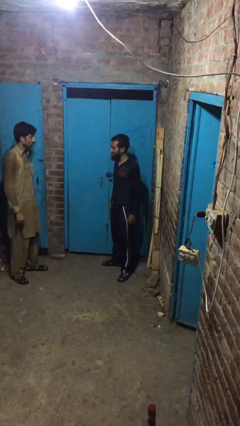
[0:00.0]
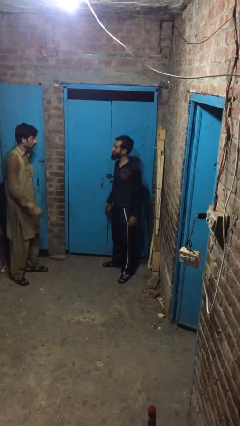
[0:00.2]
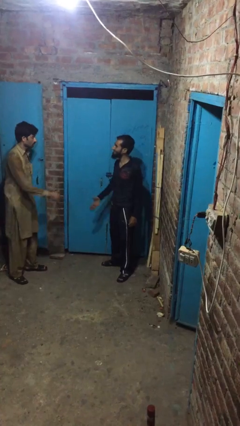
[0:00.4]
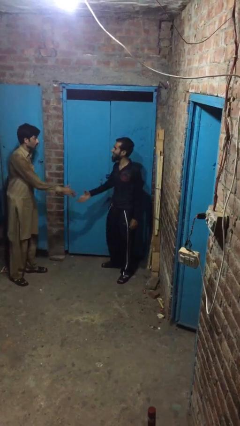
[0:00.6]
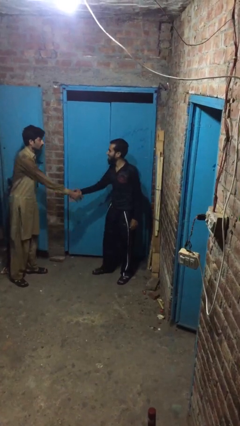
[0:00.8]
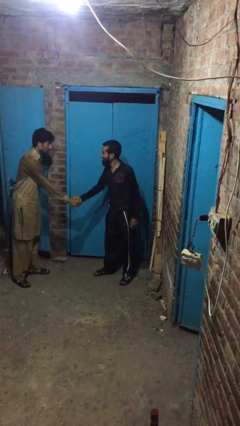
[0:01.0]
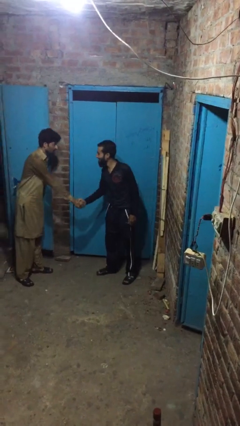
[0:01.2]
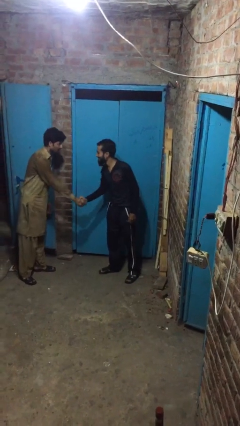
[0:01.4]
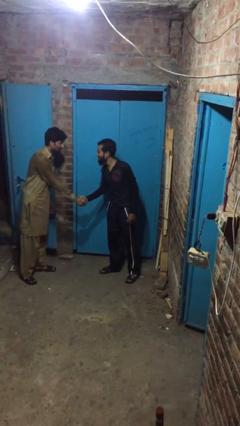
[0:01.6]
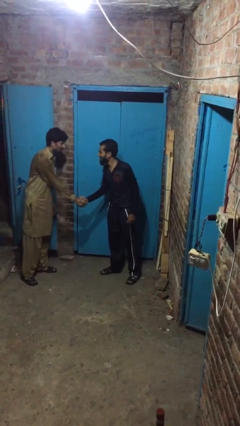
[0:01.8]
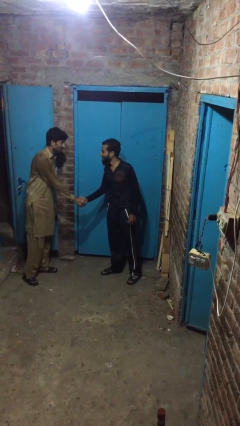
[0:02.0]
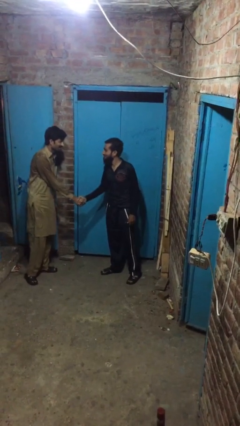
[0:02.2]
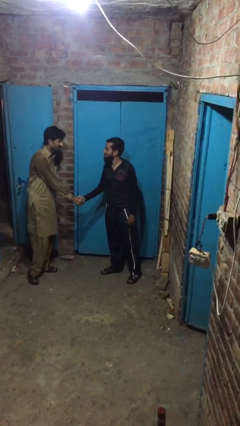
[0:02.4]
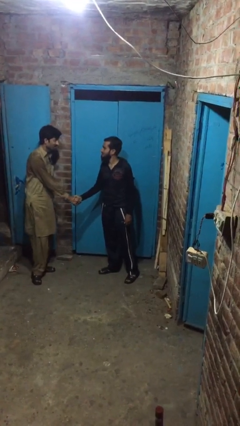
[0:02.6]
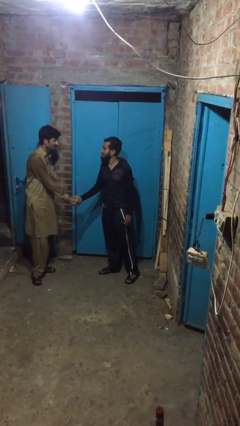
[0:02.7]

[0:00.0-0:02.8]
person shakes hand

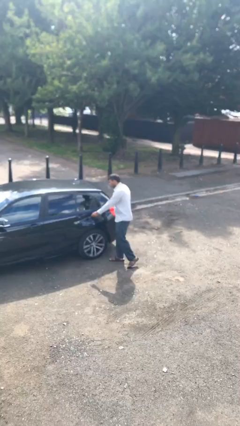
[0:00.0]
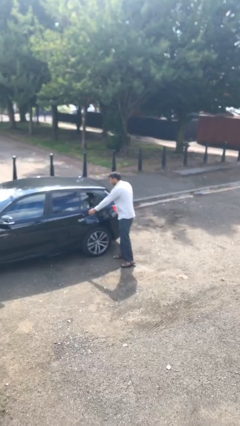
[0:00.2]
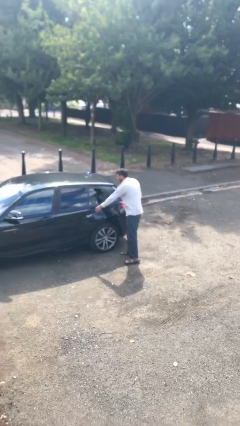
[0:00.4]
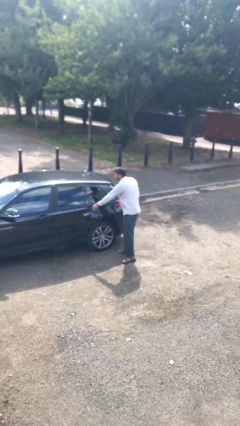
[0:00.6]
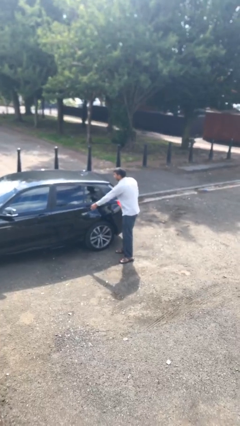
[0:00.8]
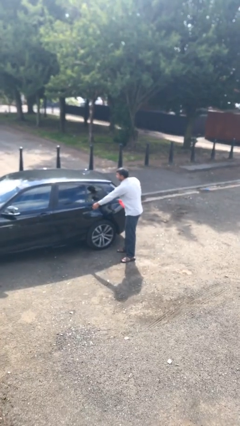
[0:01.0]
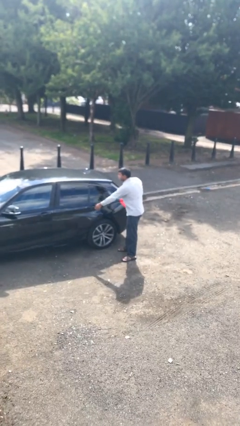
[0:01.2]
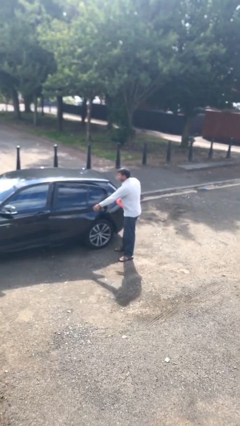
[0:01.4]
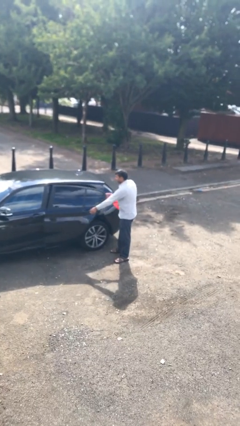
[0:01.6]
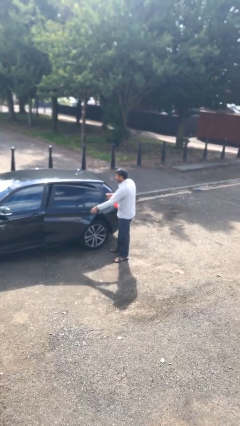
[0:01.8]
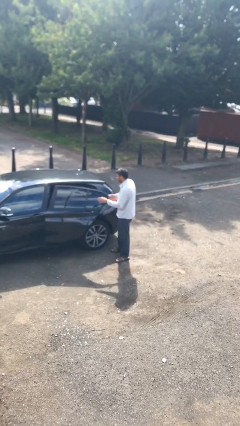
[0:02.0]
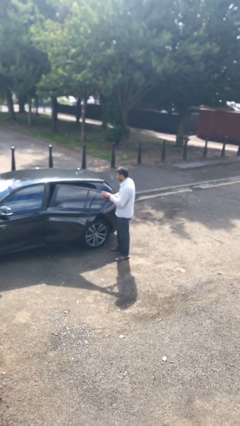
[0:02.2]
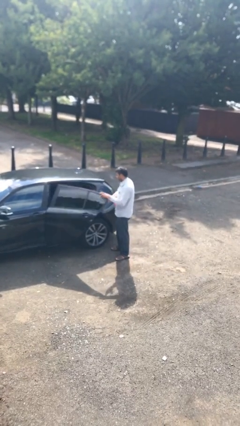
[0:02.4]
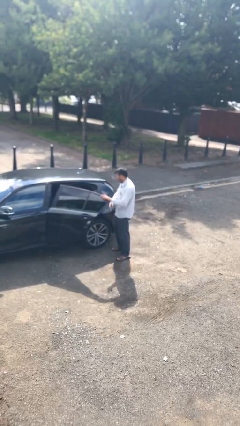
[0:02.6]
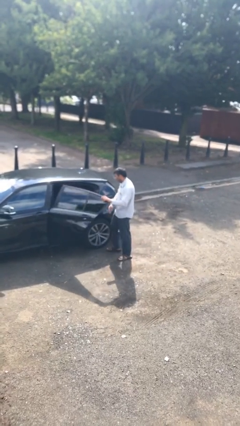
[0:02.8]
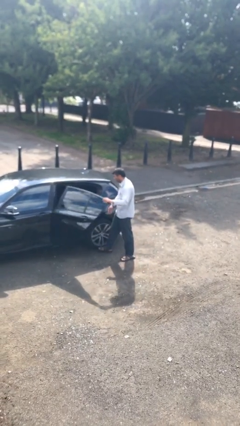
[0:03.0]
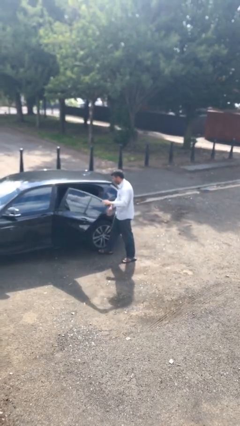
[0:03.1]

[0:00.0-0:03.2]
person opens car door

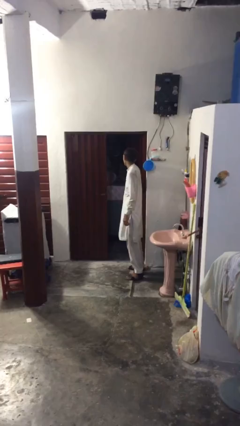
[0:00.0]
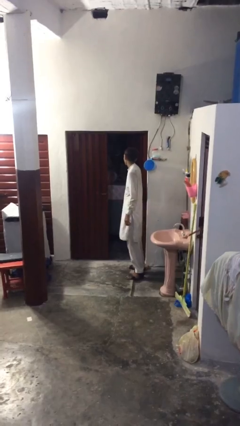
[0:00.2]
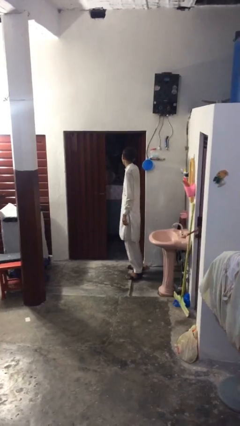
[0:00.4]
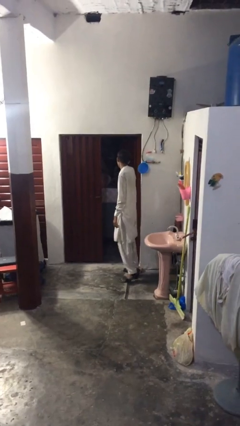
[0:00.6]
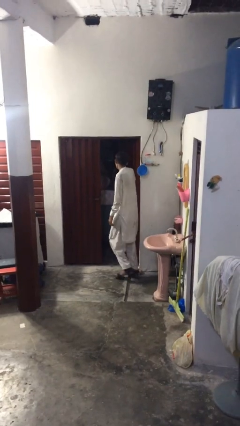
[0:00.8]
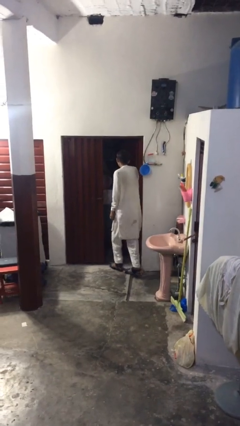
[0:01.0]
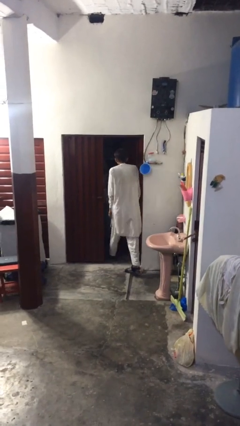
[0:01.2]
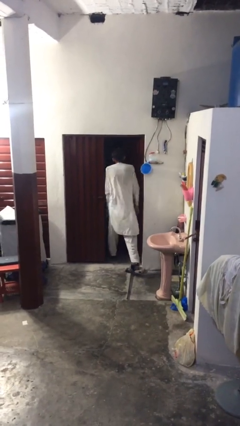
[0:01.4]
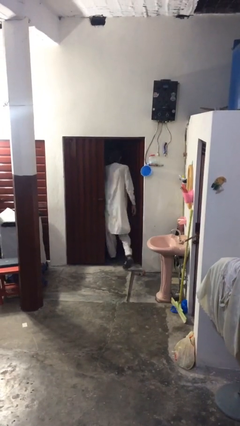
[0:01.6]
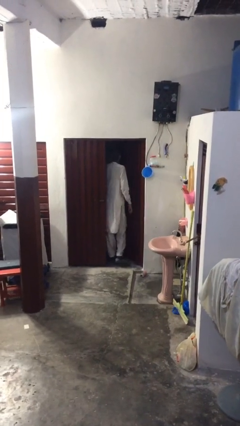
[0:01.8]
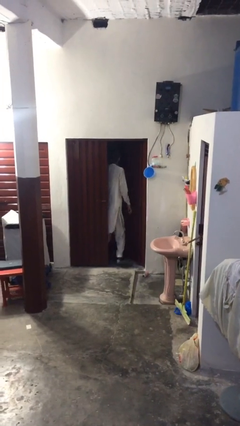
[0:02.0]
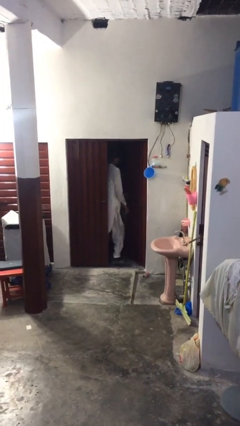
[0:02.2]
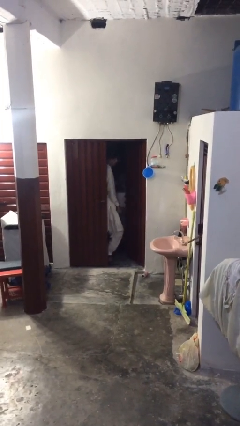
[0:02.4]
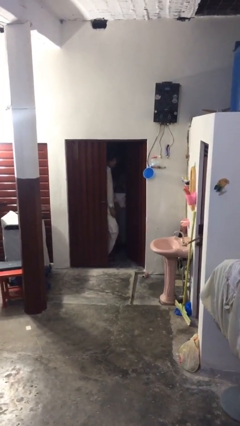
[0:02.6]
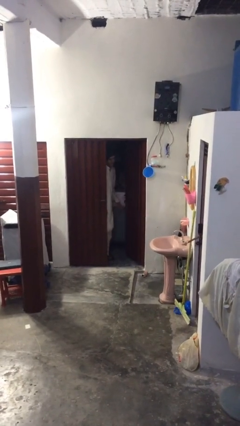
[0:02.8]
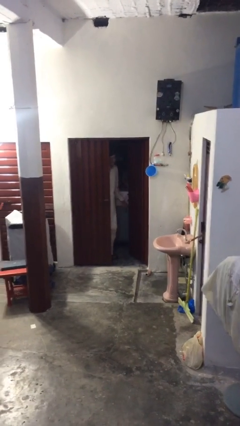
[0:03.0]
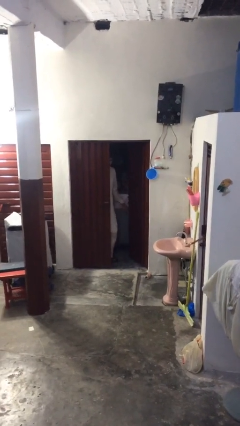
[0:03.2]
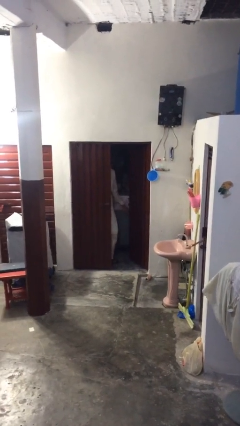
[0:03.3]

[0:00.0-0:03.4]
person exits scene through structure

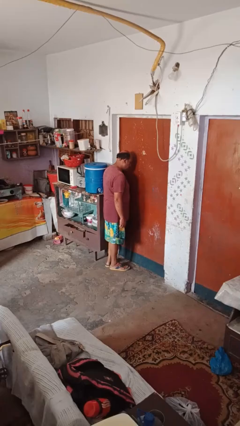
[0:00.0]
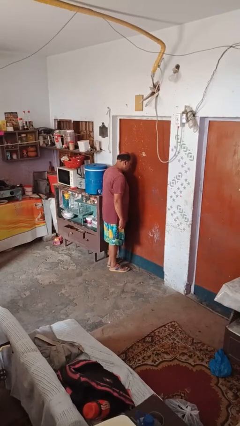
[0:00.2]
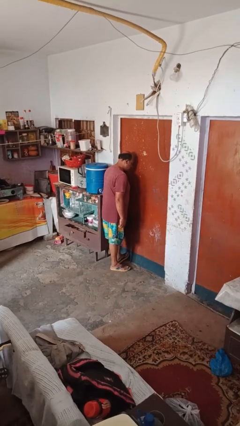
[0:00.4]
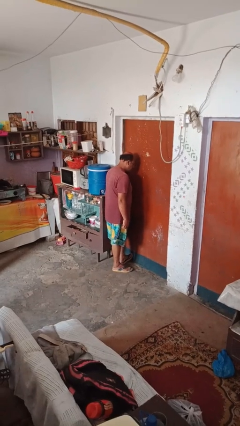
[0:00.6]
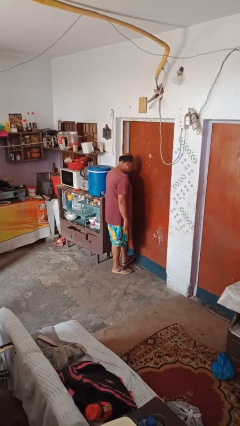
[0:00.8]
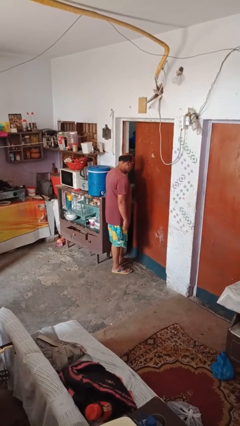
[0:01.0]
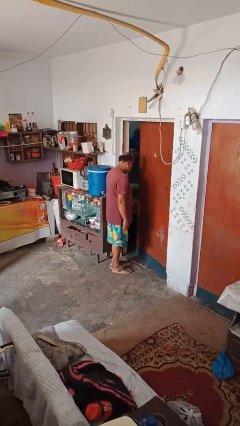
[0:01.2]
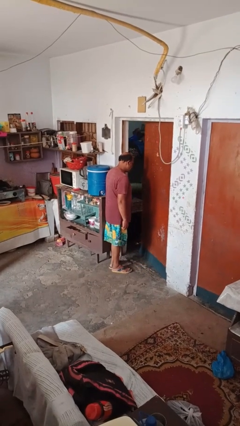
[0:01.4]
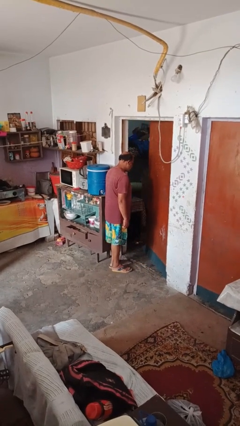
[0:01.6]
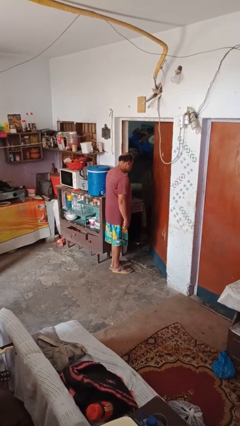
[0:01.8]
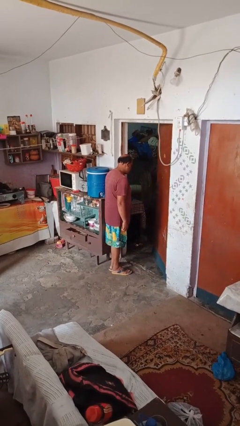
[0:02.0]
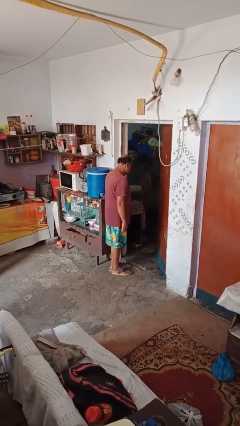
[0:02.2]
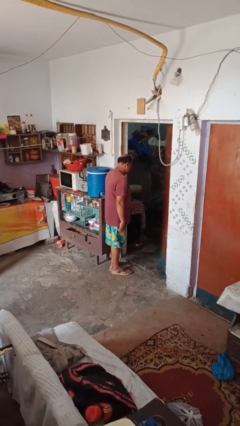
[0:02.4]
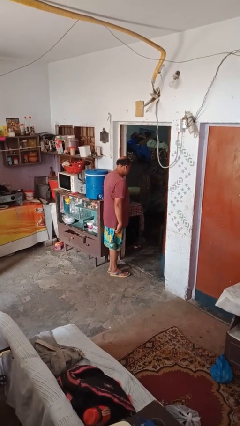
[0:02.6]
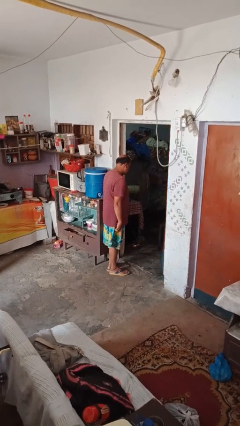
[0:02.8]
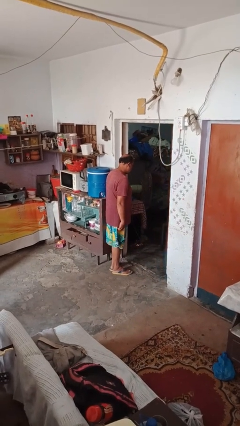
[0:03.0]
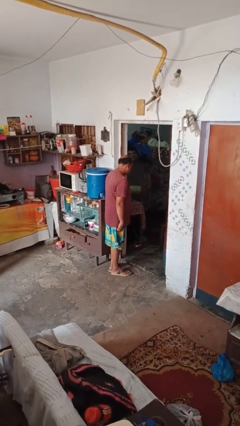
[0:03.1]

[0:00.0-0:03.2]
person opens facility door

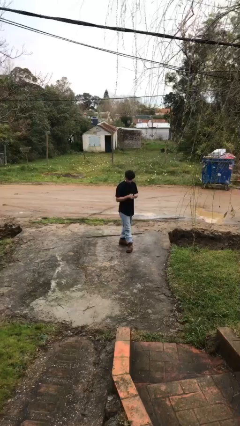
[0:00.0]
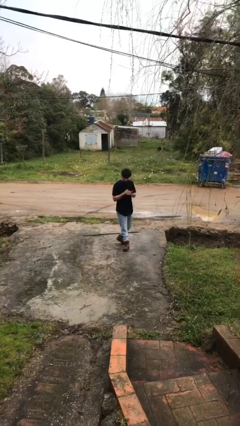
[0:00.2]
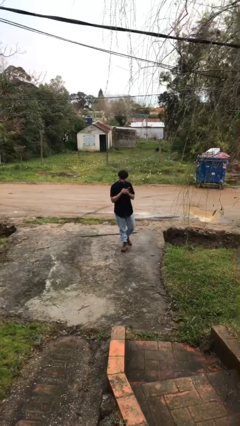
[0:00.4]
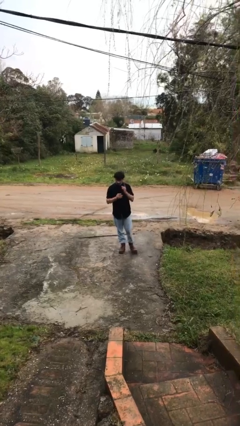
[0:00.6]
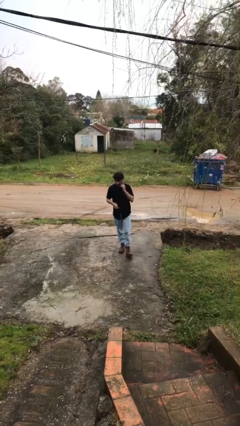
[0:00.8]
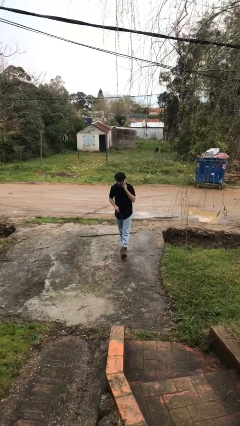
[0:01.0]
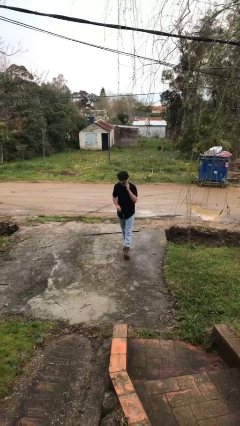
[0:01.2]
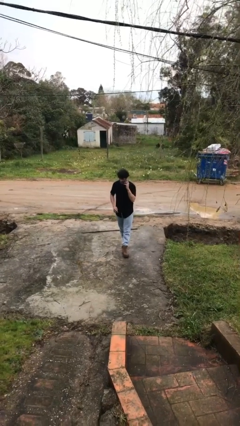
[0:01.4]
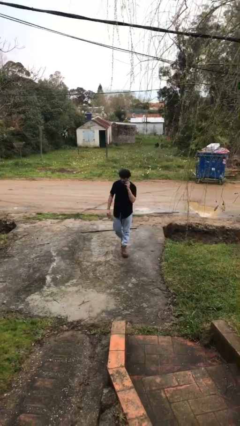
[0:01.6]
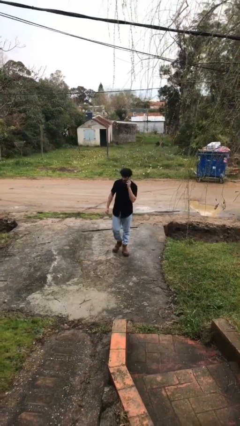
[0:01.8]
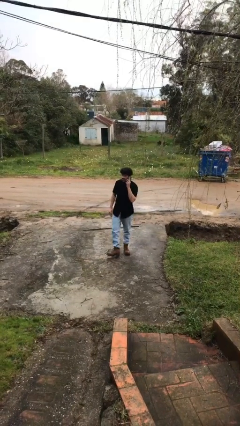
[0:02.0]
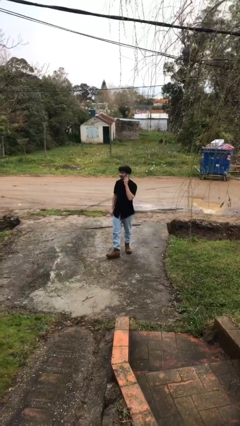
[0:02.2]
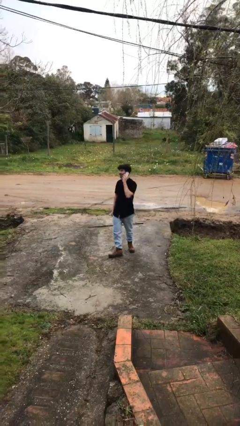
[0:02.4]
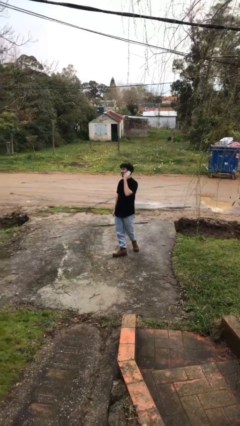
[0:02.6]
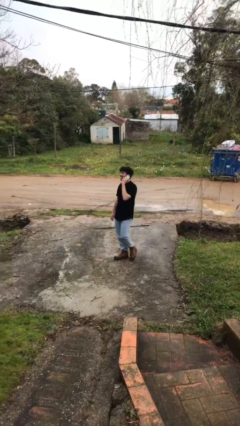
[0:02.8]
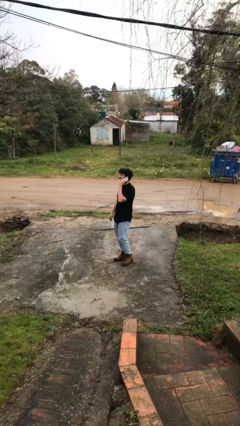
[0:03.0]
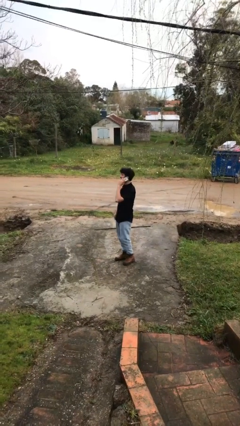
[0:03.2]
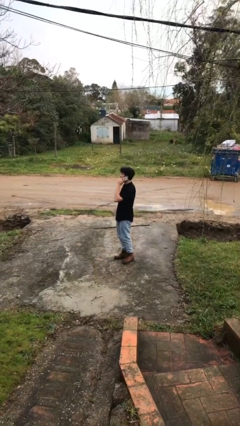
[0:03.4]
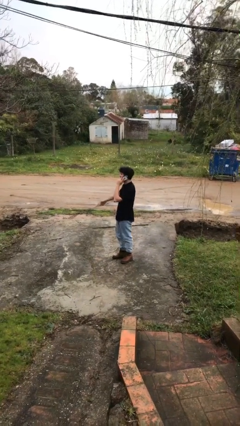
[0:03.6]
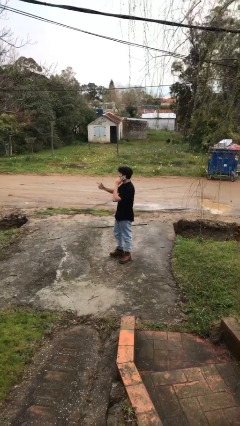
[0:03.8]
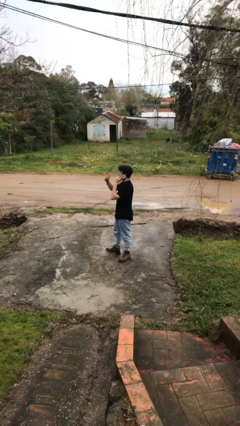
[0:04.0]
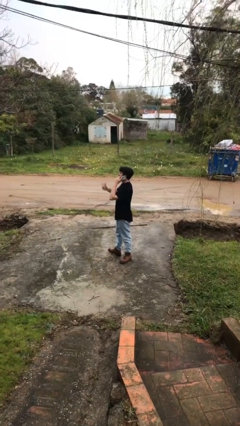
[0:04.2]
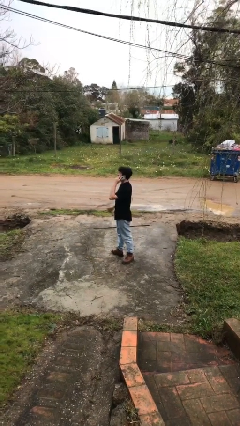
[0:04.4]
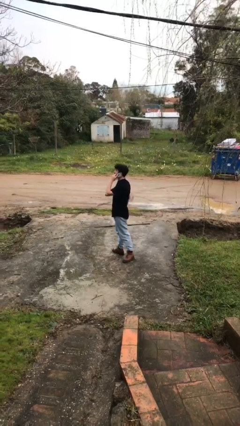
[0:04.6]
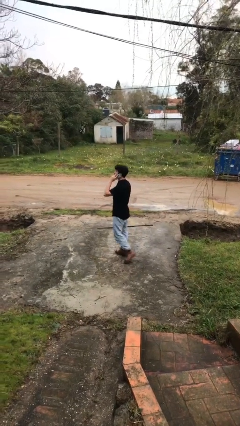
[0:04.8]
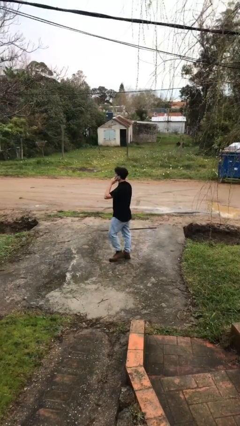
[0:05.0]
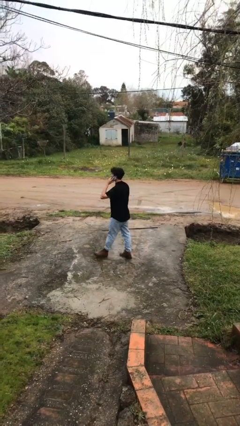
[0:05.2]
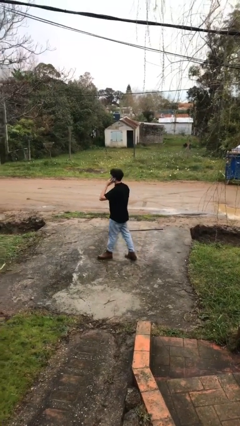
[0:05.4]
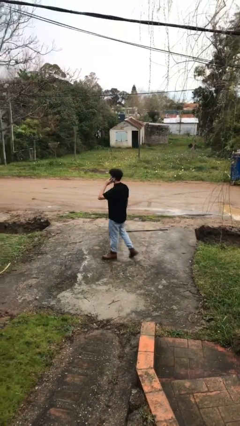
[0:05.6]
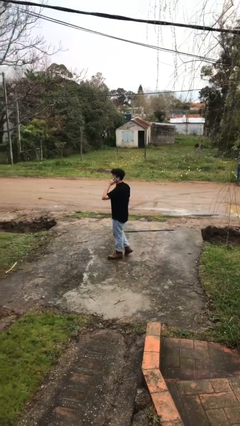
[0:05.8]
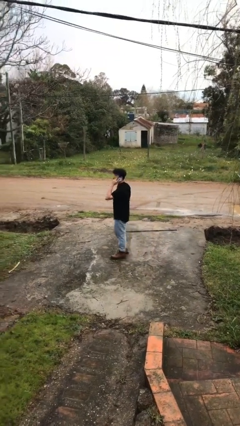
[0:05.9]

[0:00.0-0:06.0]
person talks on phone
